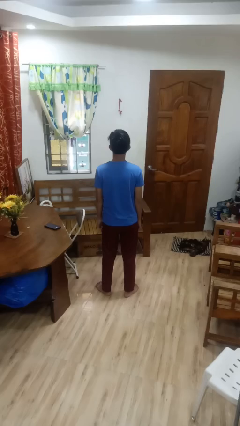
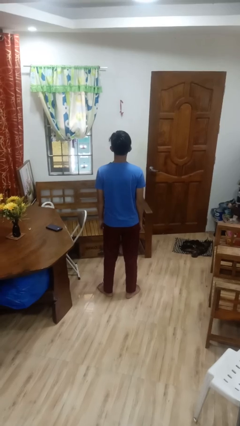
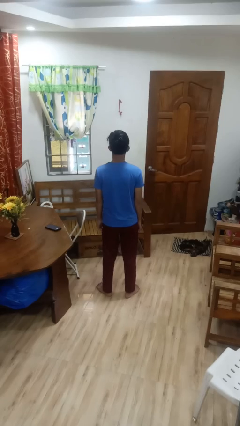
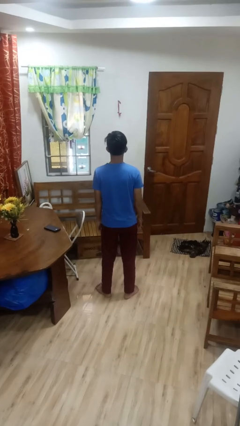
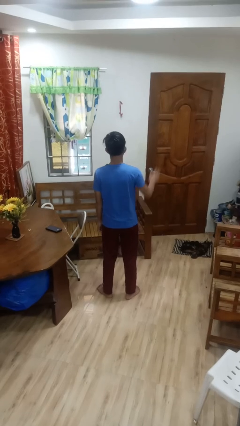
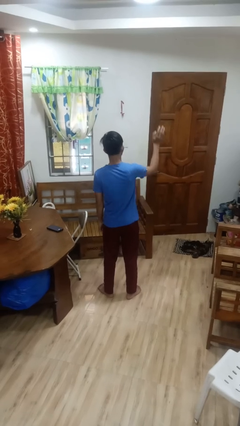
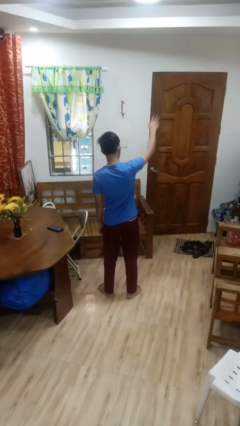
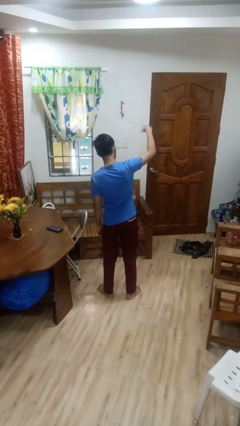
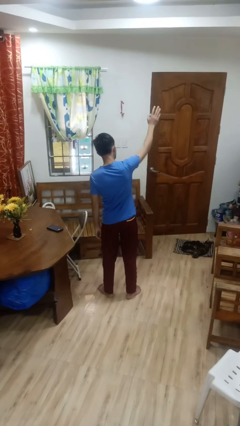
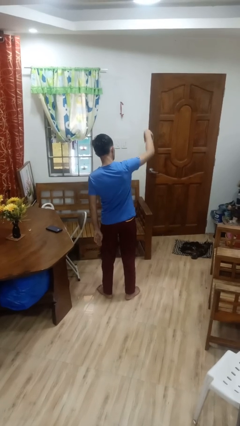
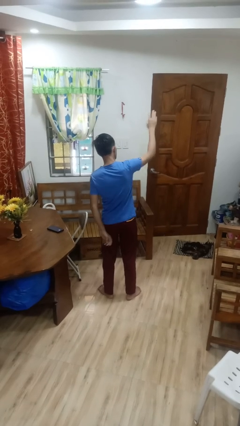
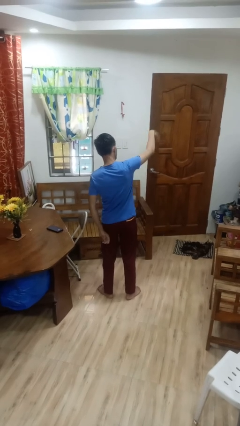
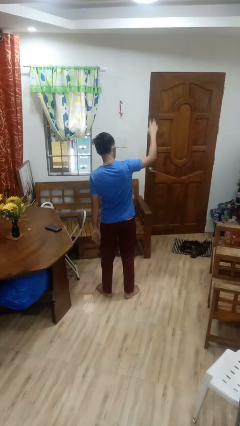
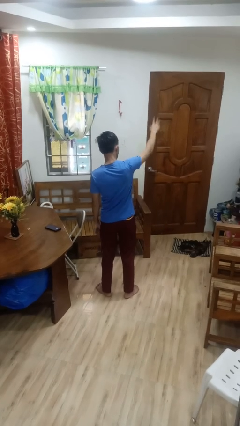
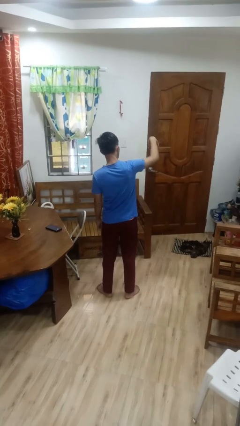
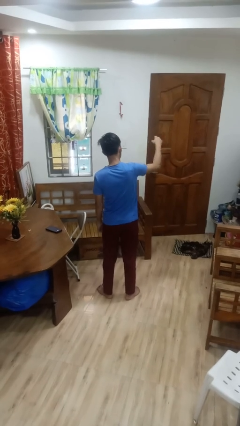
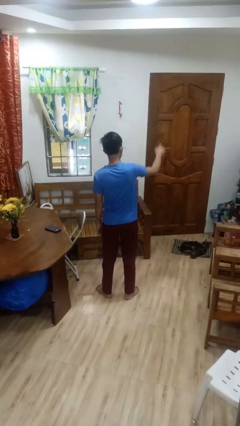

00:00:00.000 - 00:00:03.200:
person gestures come here

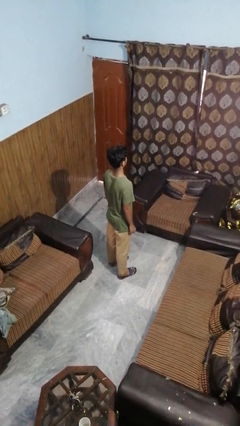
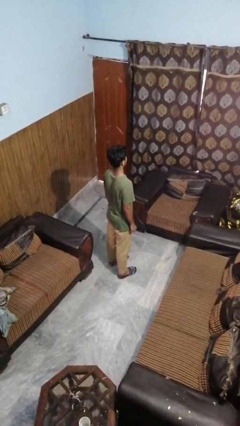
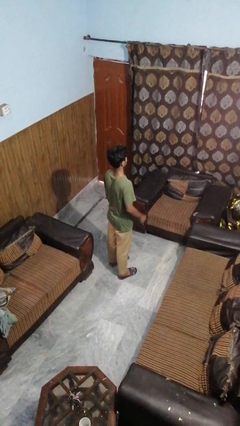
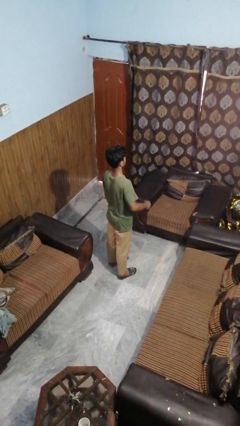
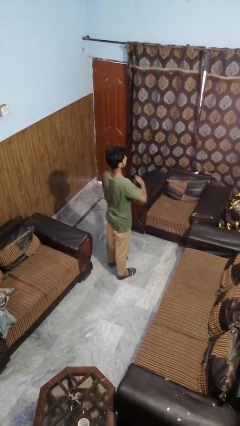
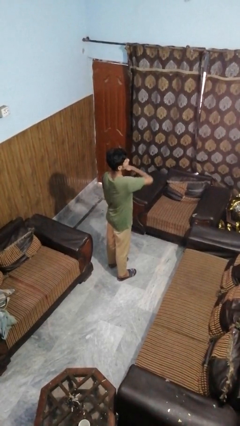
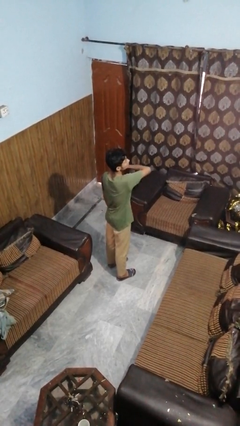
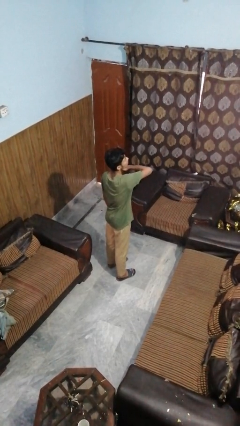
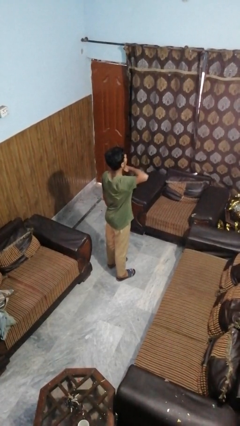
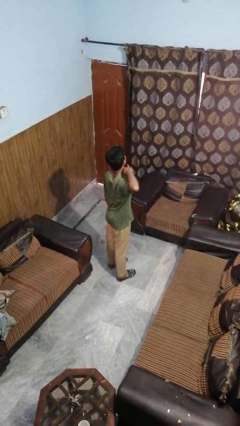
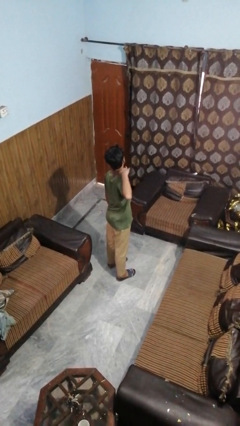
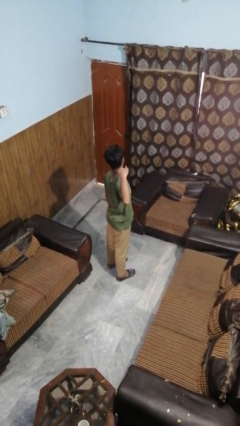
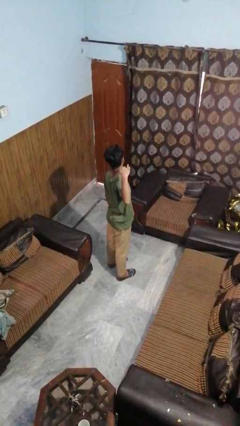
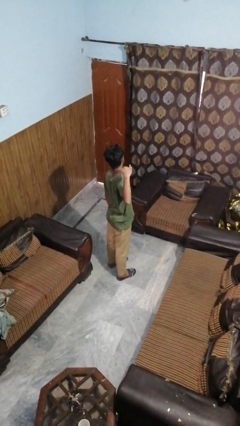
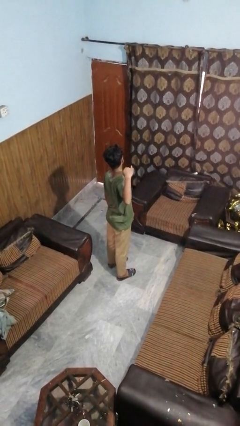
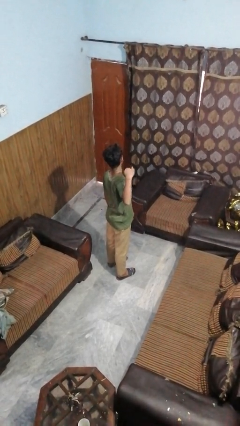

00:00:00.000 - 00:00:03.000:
person gestures cut

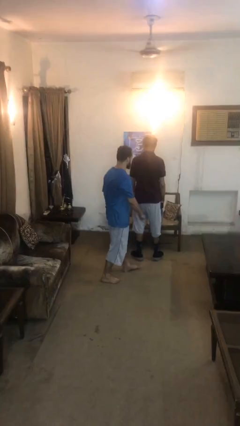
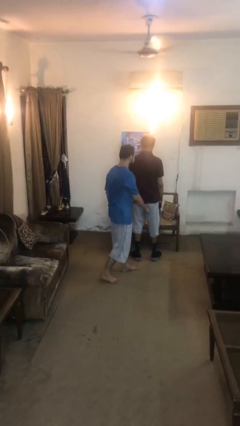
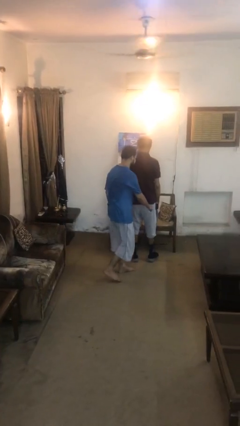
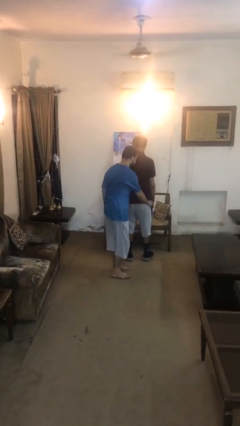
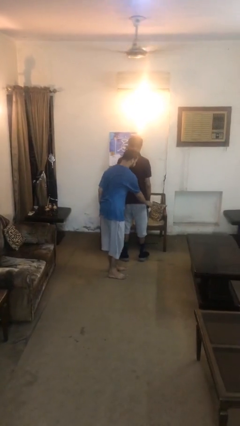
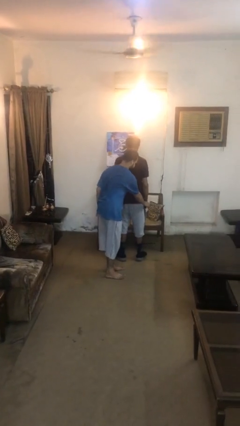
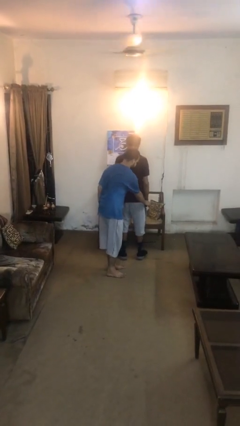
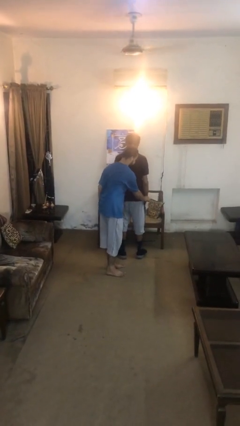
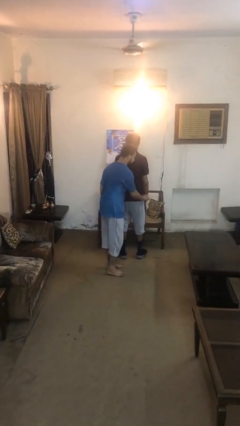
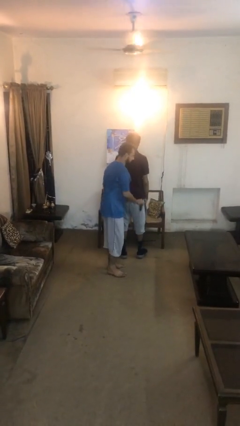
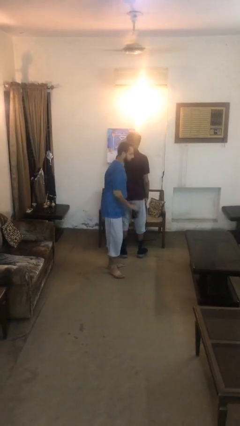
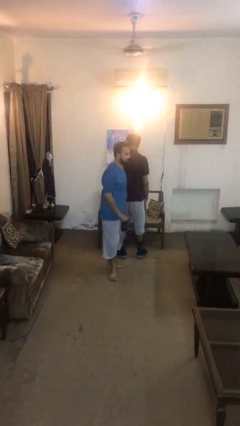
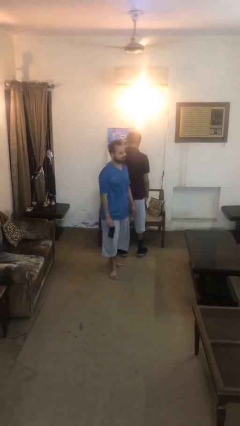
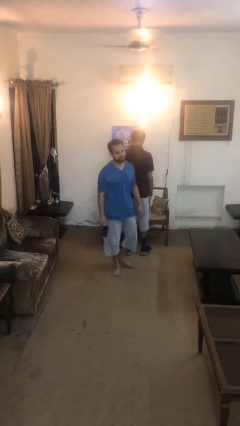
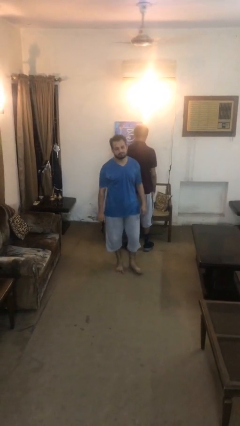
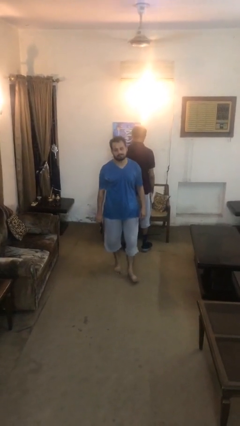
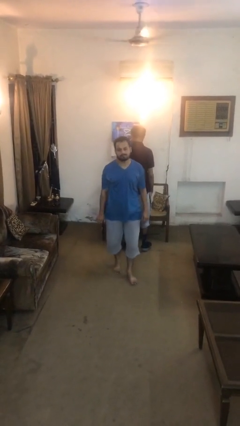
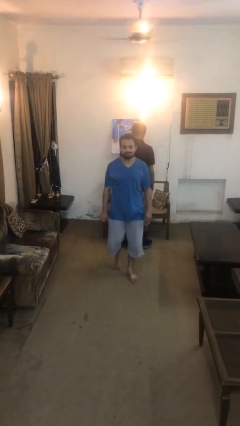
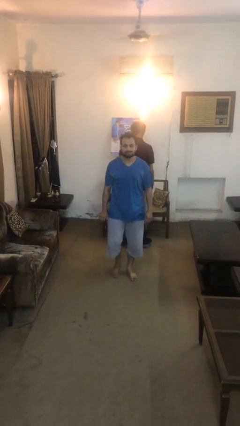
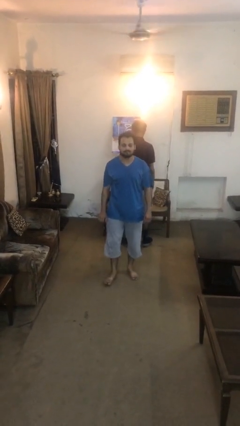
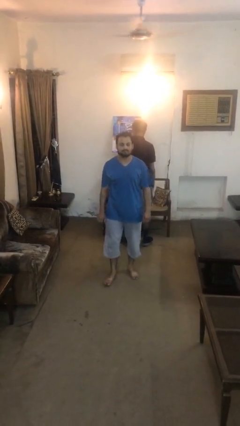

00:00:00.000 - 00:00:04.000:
person steals object from person

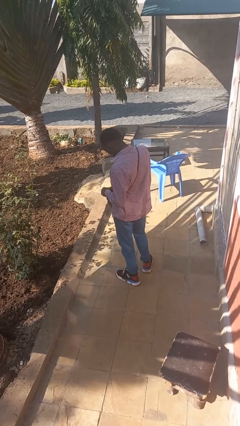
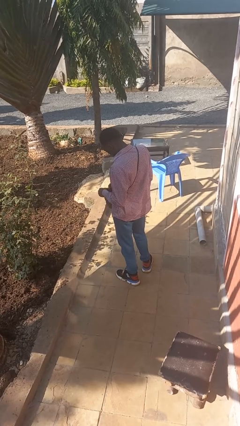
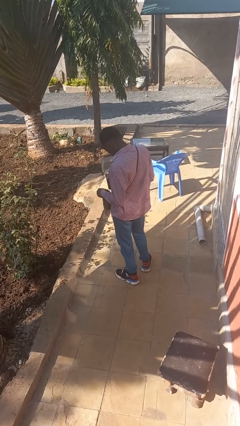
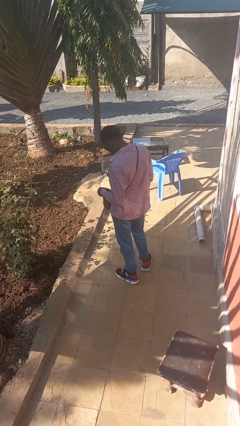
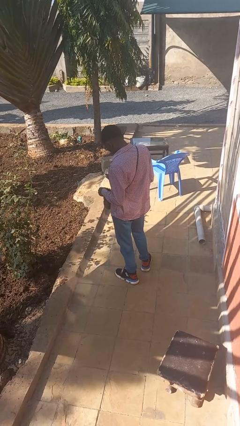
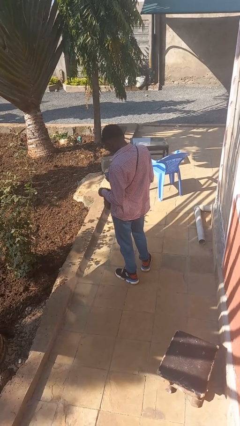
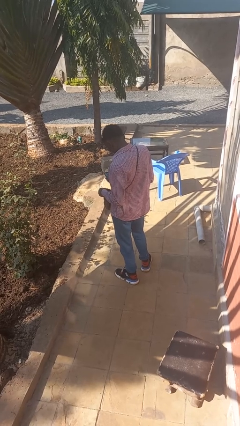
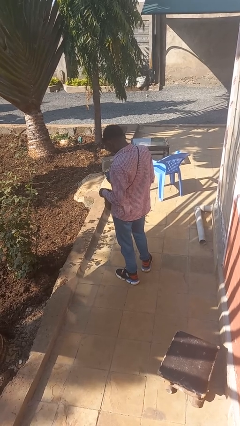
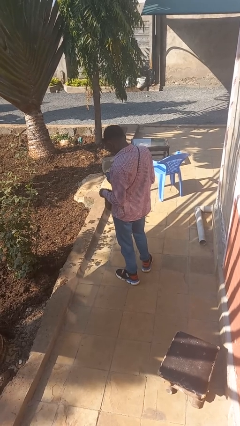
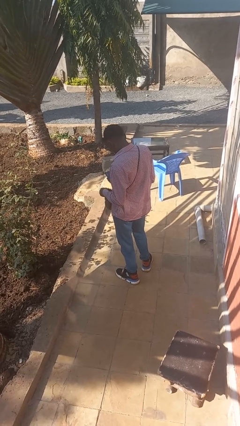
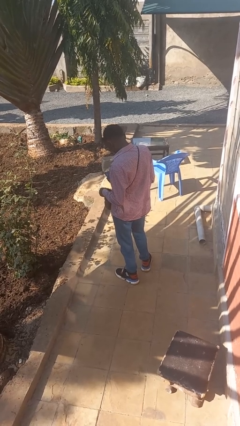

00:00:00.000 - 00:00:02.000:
person takes object from purse

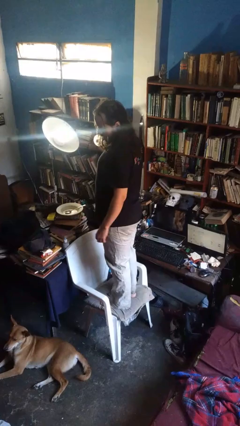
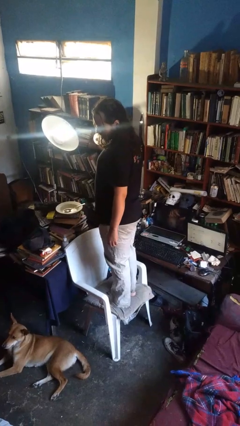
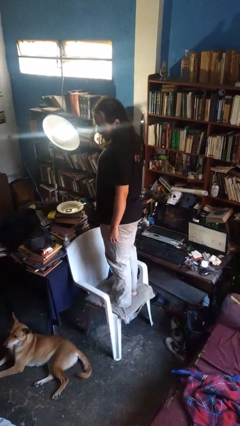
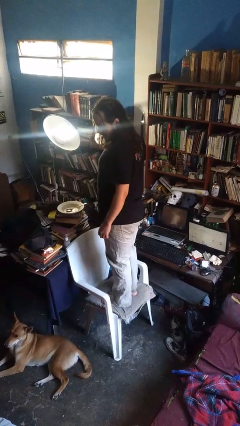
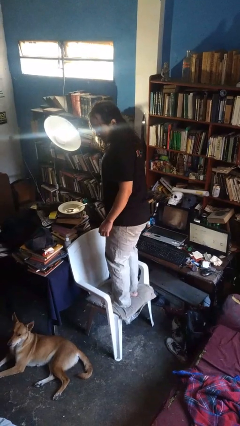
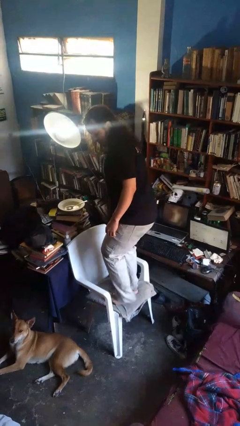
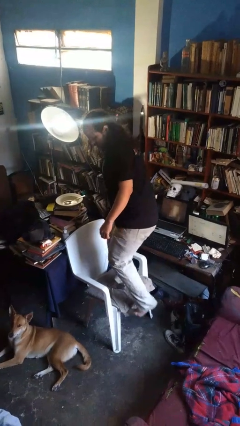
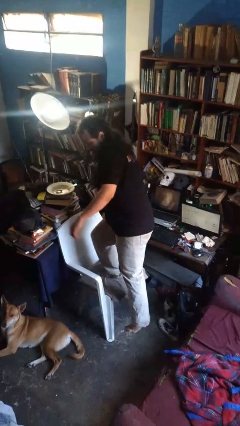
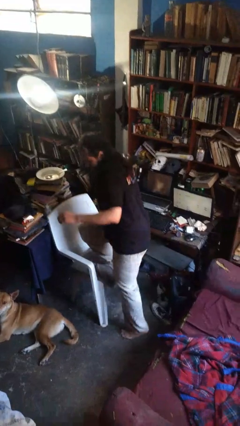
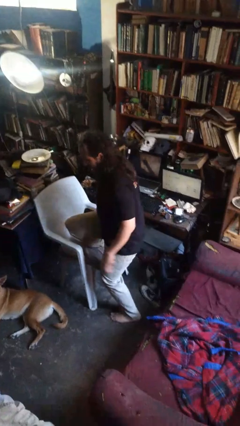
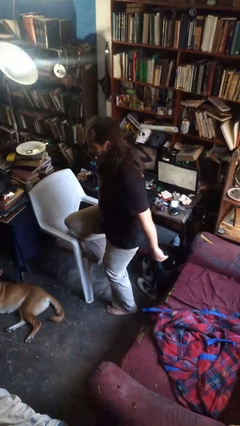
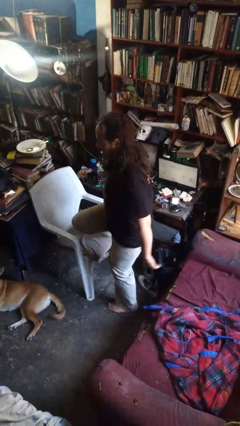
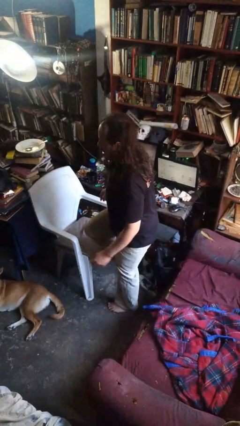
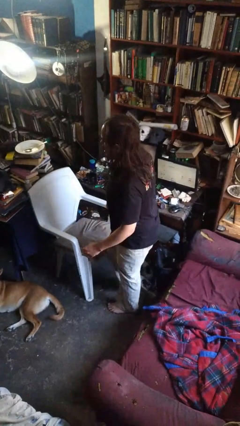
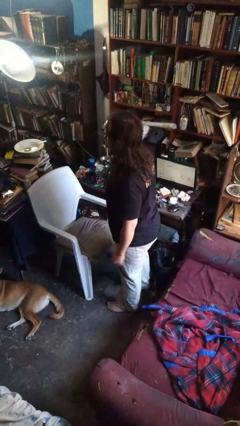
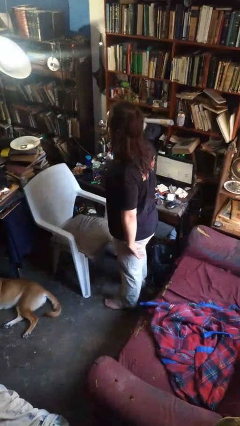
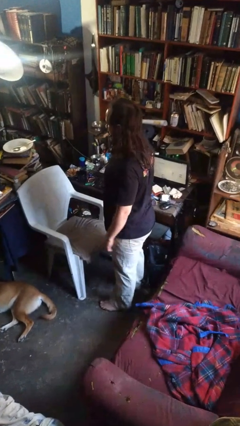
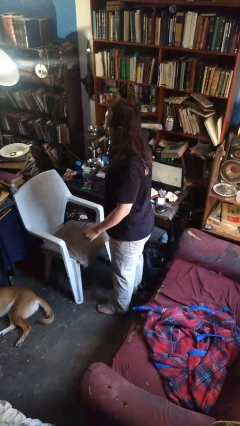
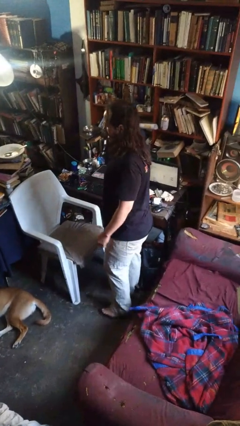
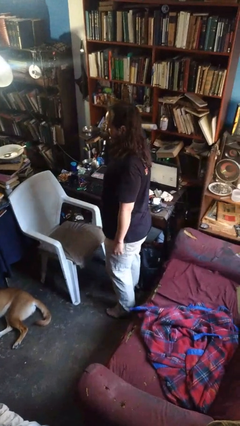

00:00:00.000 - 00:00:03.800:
person climbs off chair

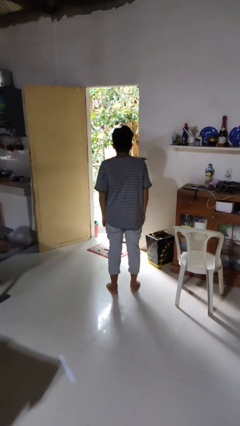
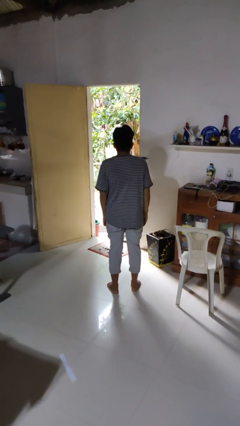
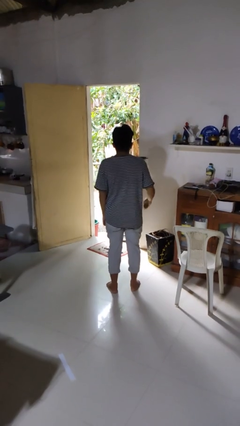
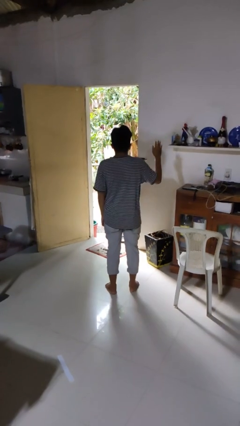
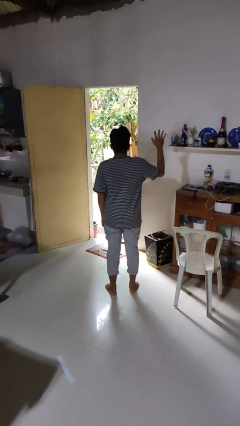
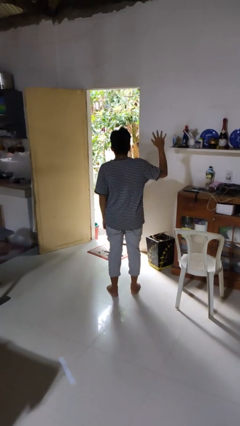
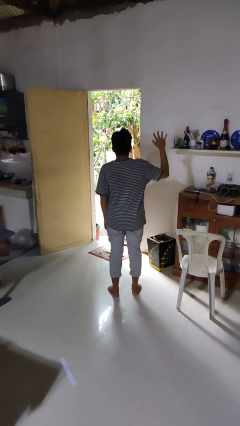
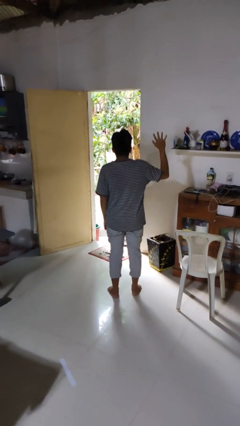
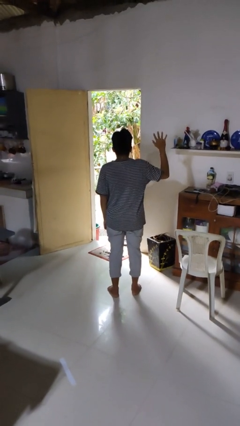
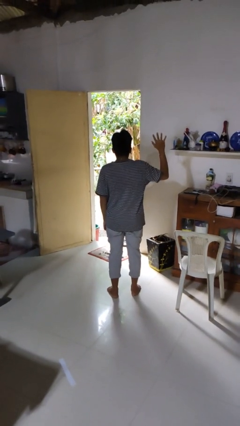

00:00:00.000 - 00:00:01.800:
person gestures number five
